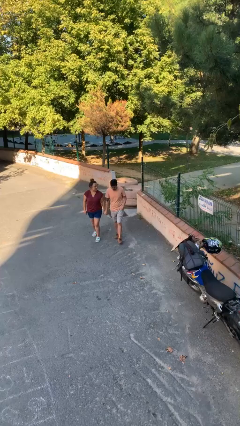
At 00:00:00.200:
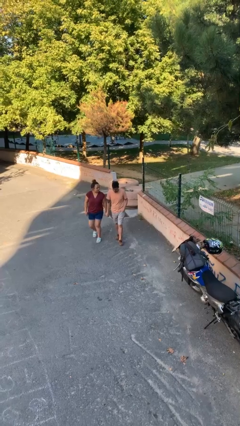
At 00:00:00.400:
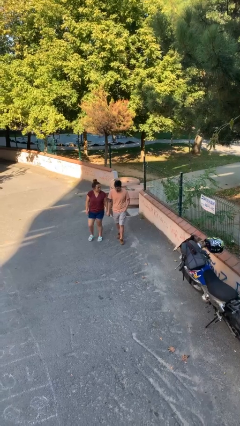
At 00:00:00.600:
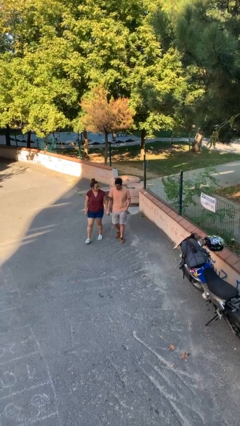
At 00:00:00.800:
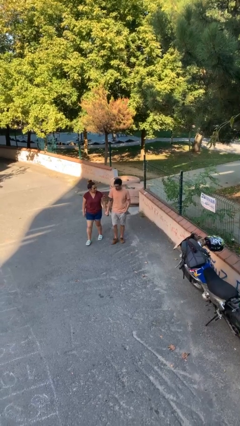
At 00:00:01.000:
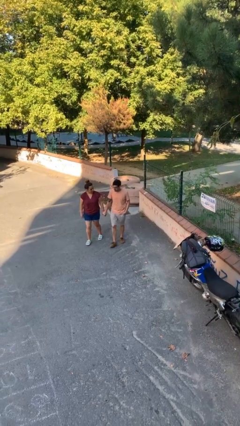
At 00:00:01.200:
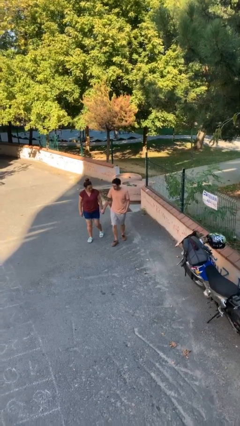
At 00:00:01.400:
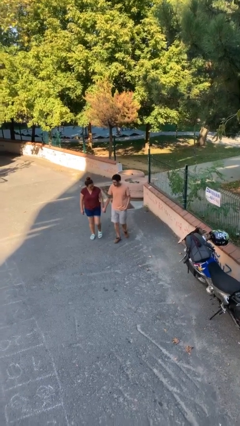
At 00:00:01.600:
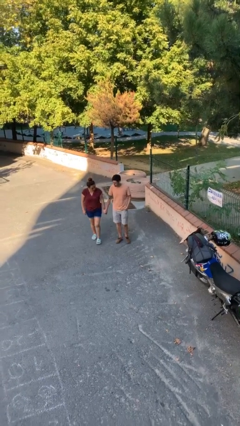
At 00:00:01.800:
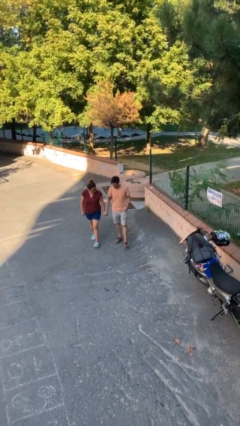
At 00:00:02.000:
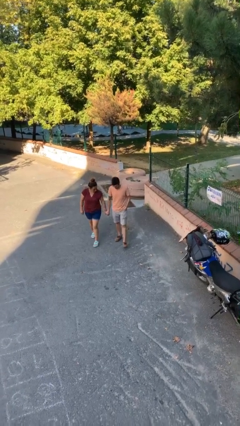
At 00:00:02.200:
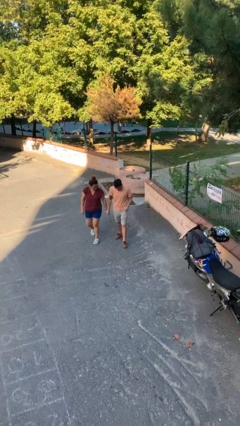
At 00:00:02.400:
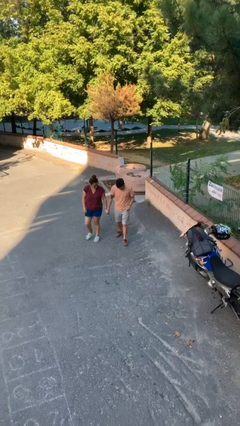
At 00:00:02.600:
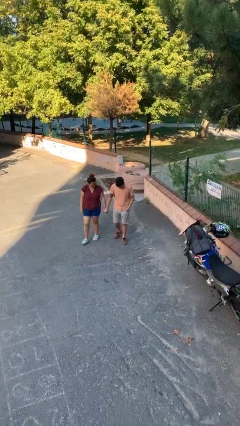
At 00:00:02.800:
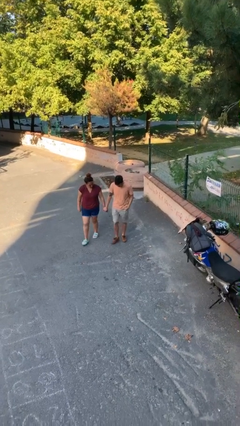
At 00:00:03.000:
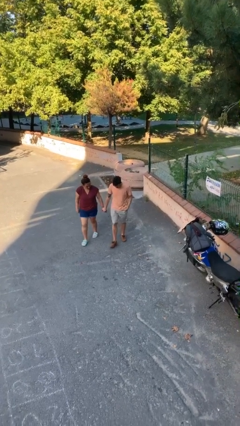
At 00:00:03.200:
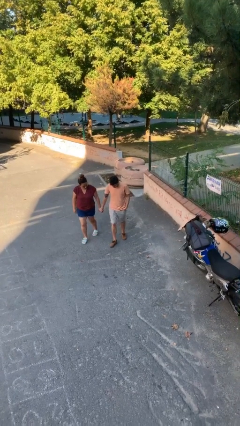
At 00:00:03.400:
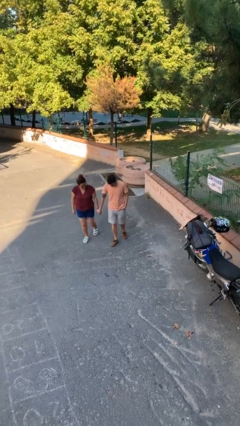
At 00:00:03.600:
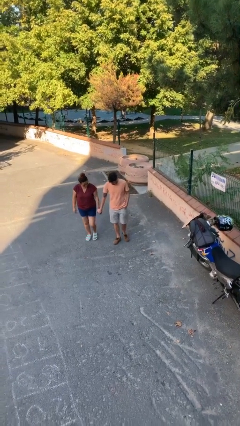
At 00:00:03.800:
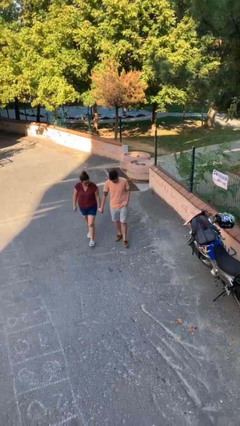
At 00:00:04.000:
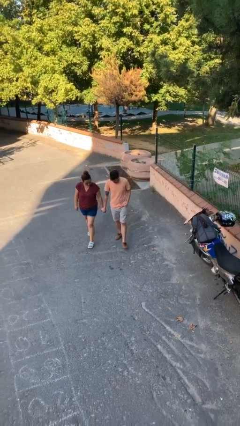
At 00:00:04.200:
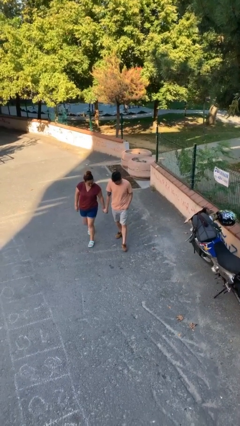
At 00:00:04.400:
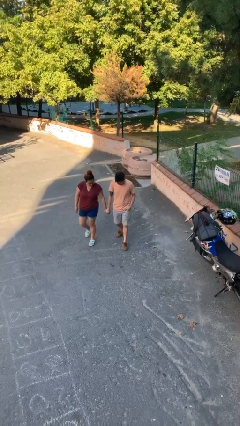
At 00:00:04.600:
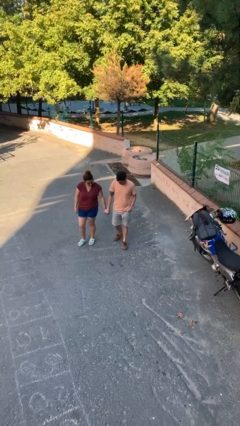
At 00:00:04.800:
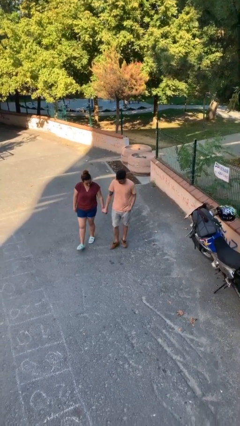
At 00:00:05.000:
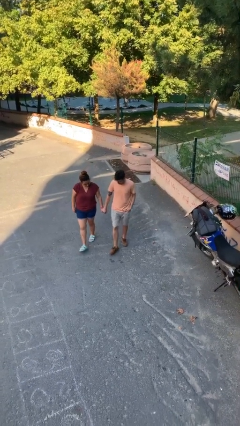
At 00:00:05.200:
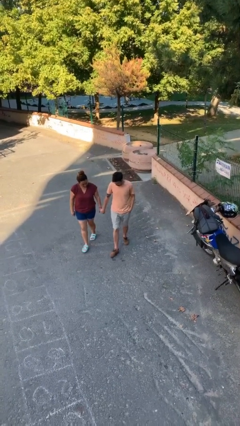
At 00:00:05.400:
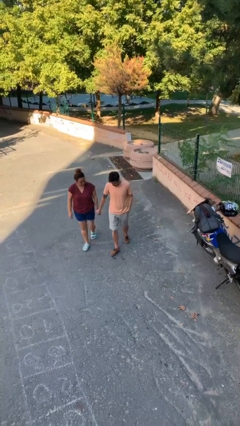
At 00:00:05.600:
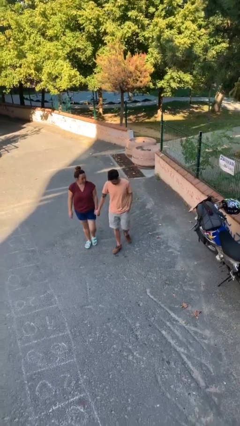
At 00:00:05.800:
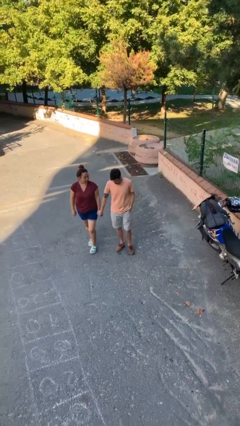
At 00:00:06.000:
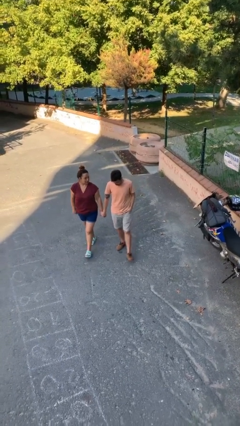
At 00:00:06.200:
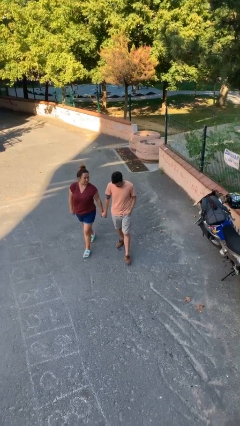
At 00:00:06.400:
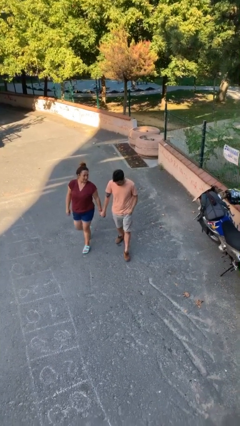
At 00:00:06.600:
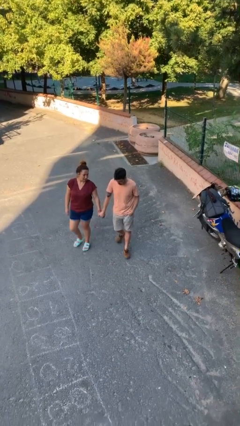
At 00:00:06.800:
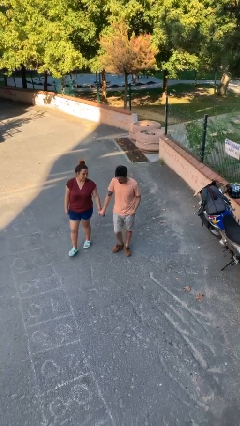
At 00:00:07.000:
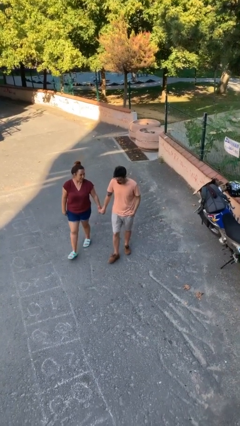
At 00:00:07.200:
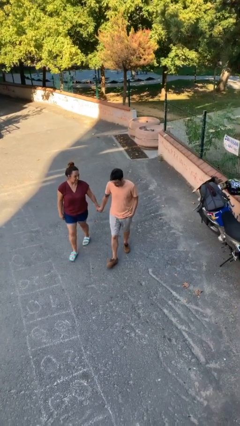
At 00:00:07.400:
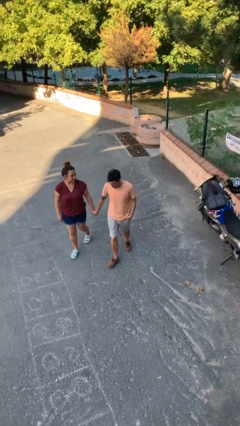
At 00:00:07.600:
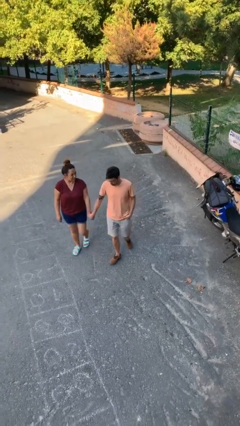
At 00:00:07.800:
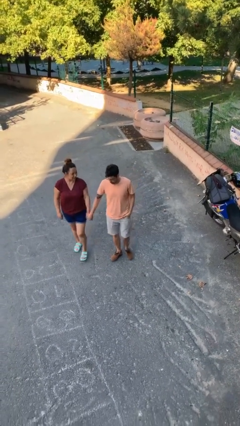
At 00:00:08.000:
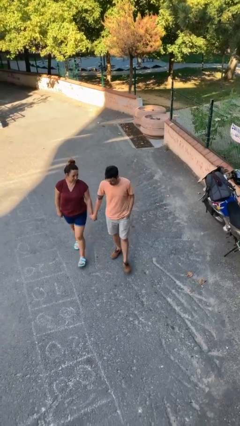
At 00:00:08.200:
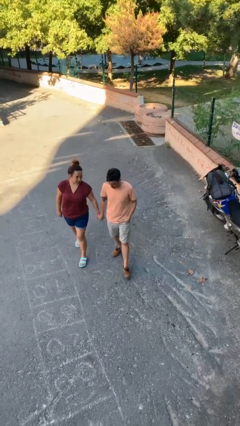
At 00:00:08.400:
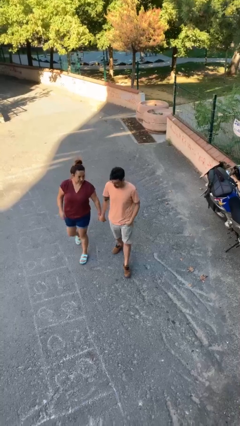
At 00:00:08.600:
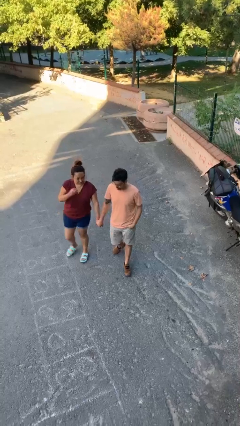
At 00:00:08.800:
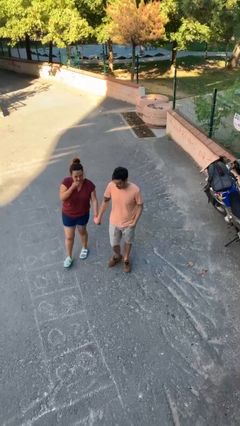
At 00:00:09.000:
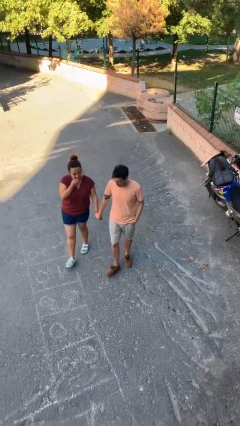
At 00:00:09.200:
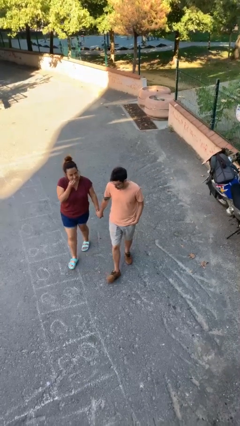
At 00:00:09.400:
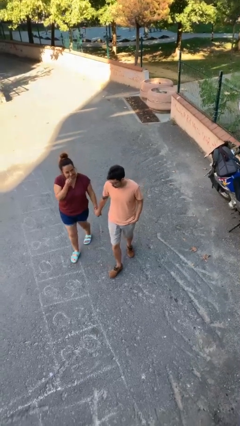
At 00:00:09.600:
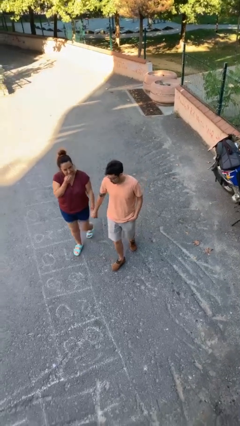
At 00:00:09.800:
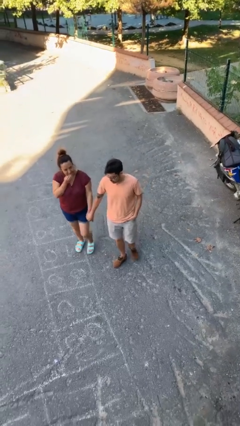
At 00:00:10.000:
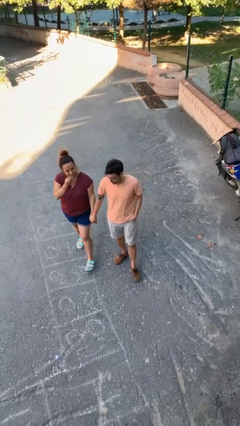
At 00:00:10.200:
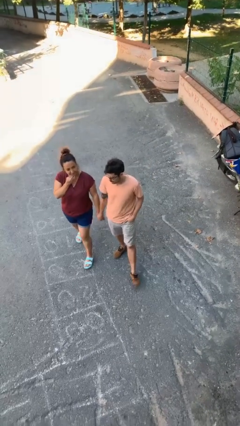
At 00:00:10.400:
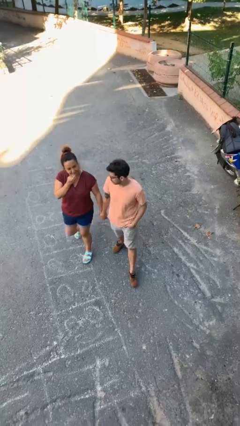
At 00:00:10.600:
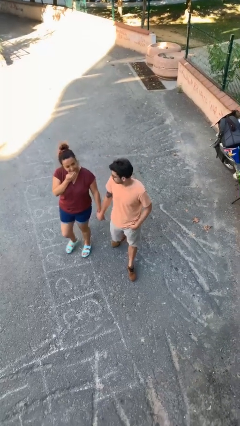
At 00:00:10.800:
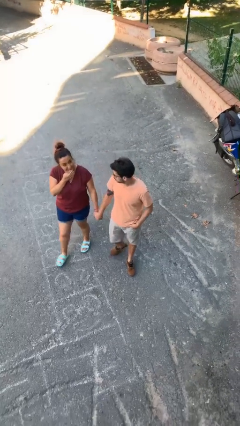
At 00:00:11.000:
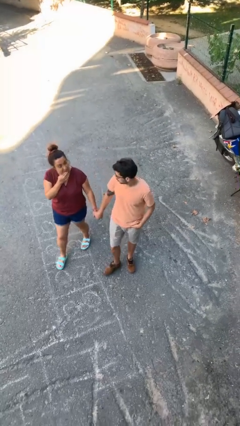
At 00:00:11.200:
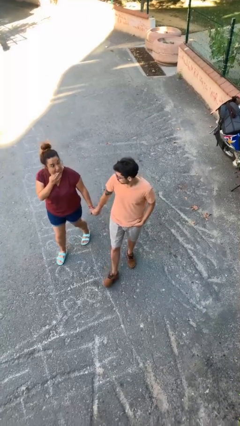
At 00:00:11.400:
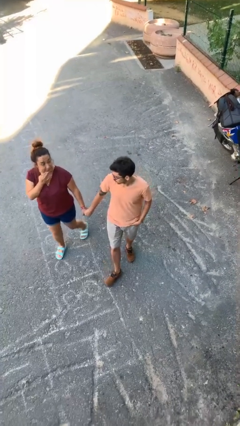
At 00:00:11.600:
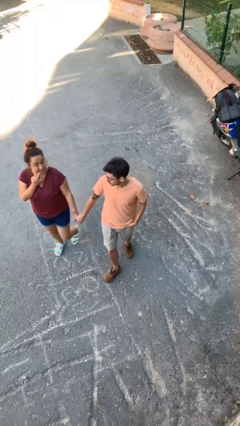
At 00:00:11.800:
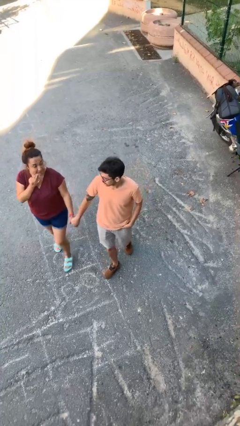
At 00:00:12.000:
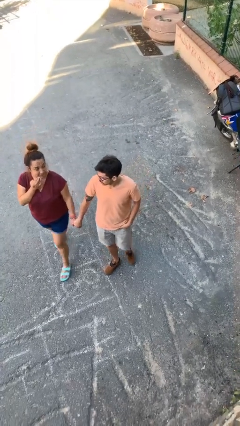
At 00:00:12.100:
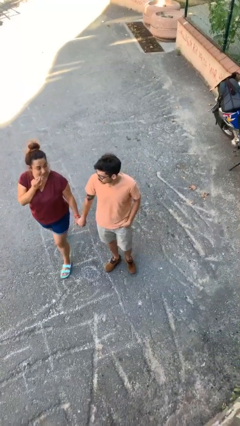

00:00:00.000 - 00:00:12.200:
person holds hand

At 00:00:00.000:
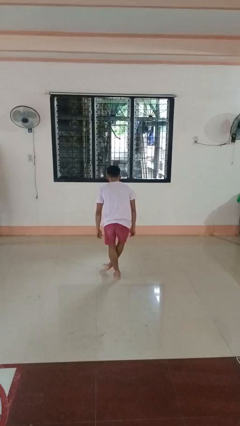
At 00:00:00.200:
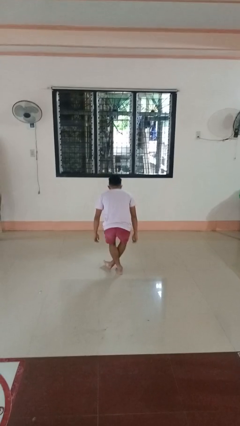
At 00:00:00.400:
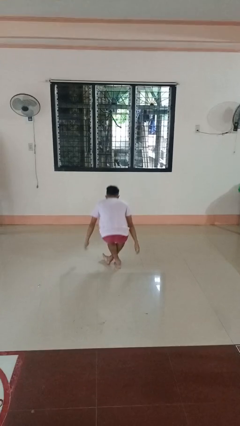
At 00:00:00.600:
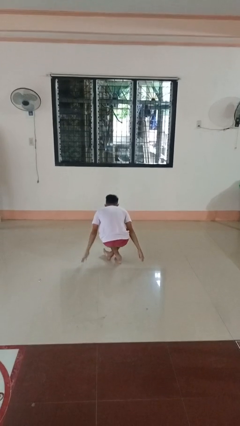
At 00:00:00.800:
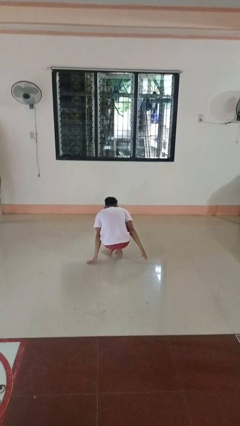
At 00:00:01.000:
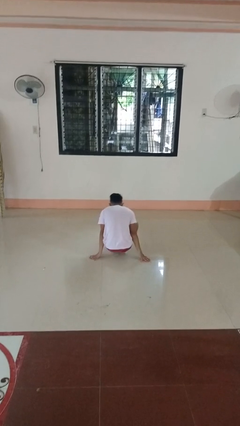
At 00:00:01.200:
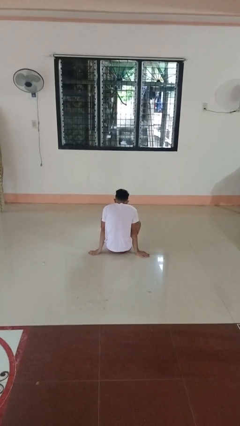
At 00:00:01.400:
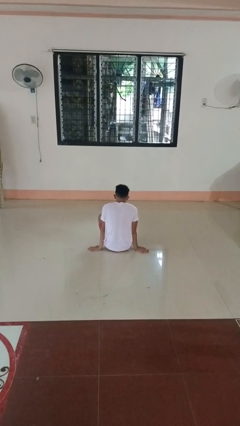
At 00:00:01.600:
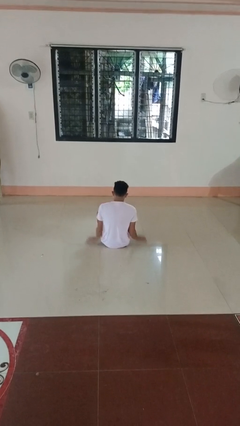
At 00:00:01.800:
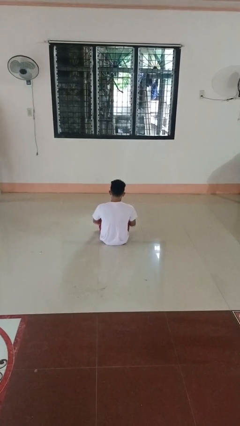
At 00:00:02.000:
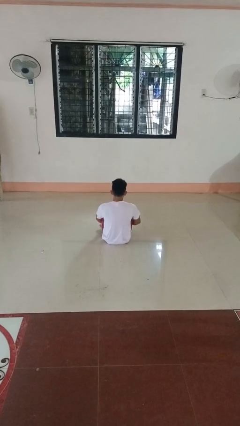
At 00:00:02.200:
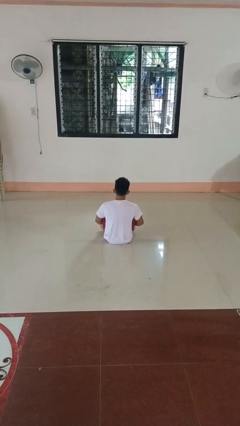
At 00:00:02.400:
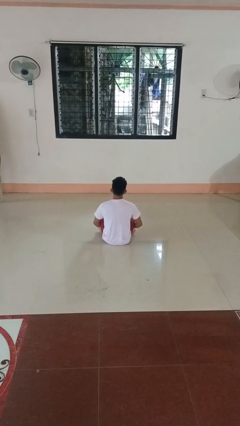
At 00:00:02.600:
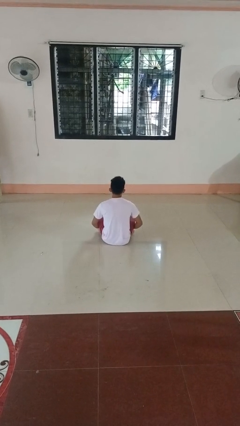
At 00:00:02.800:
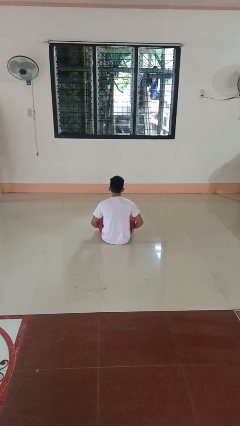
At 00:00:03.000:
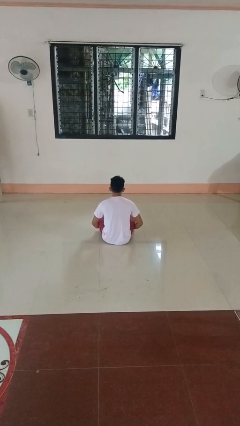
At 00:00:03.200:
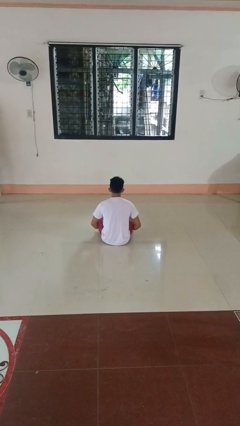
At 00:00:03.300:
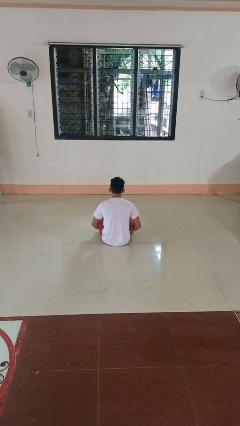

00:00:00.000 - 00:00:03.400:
person sits crisscross

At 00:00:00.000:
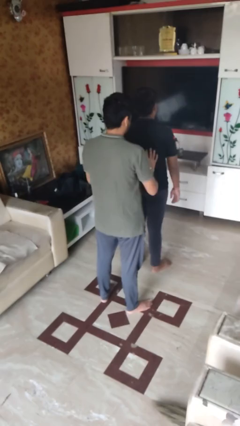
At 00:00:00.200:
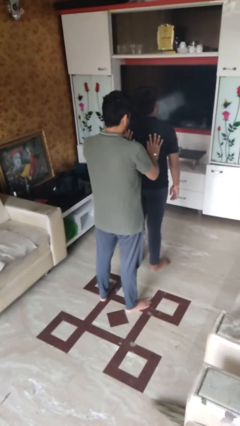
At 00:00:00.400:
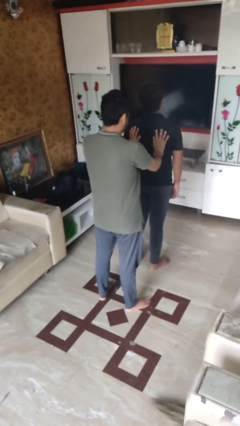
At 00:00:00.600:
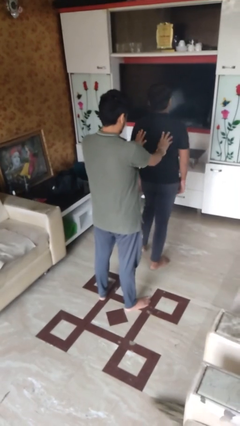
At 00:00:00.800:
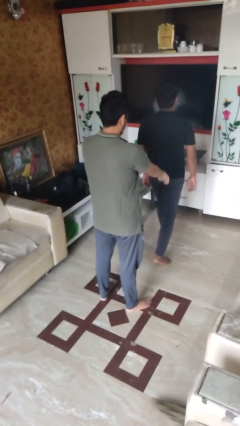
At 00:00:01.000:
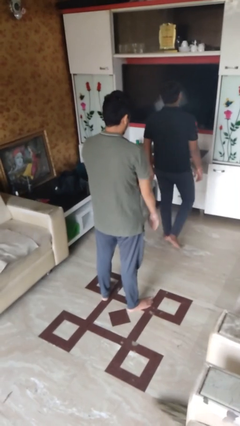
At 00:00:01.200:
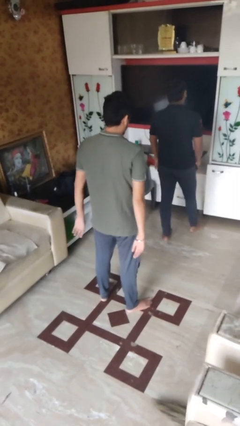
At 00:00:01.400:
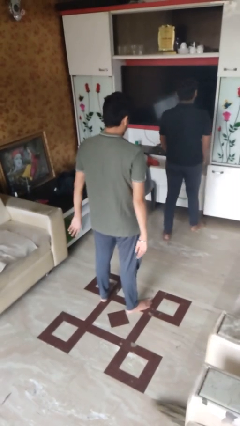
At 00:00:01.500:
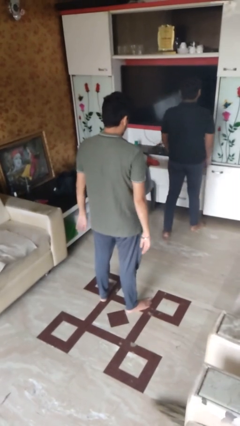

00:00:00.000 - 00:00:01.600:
person shoves person

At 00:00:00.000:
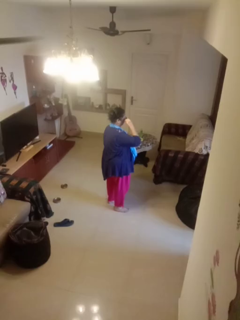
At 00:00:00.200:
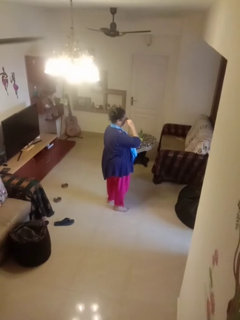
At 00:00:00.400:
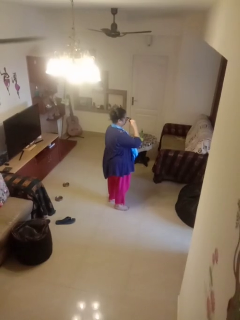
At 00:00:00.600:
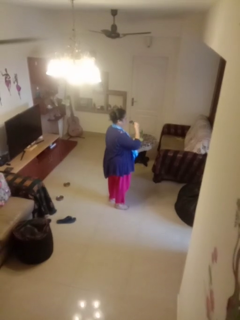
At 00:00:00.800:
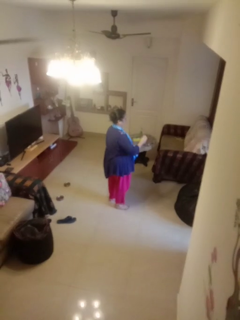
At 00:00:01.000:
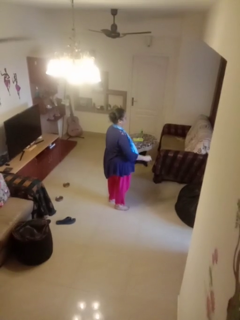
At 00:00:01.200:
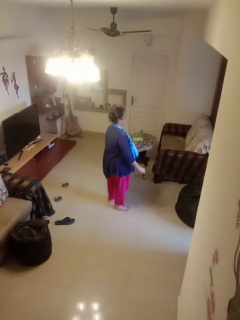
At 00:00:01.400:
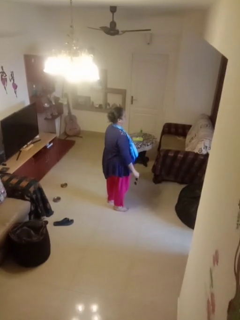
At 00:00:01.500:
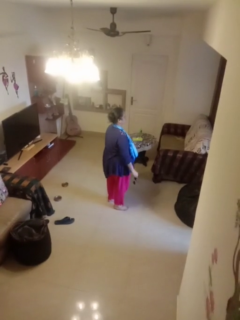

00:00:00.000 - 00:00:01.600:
person takes off sunglasses
